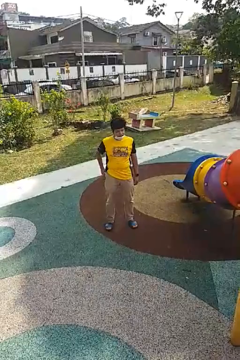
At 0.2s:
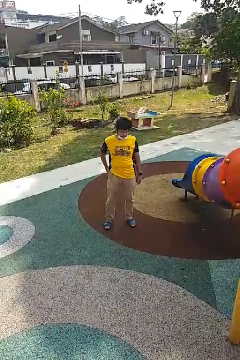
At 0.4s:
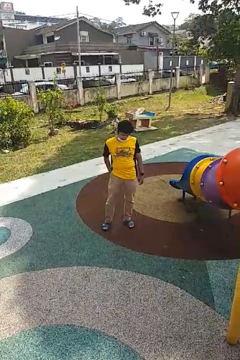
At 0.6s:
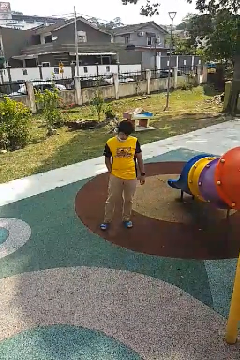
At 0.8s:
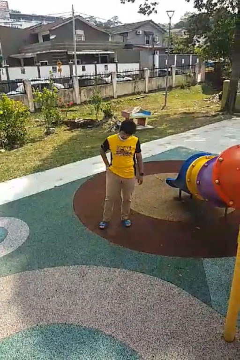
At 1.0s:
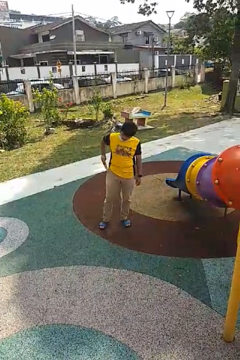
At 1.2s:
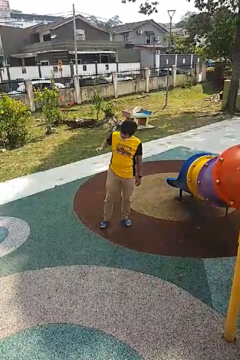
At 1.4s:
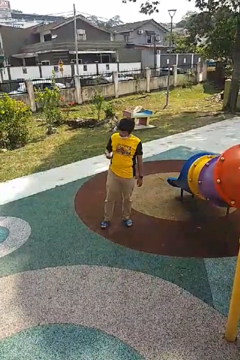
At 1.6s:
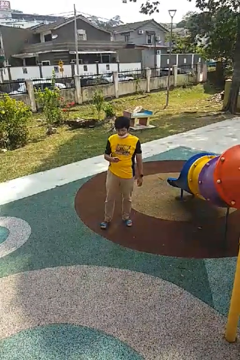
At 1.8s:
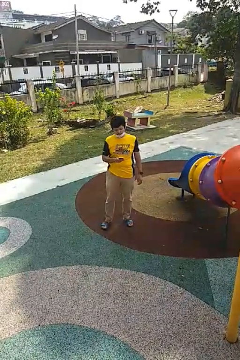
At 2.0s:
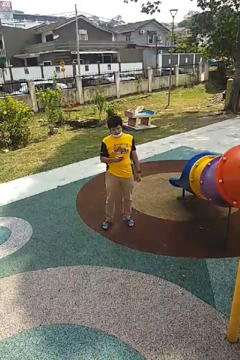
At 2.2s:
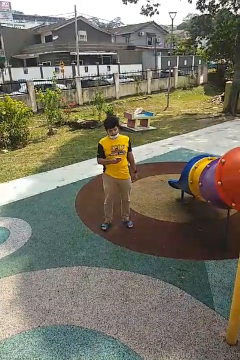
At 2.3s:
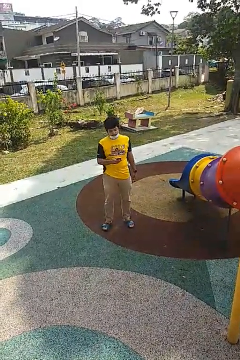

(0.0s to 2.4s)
person takes phone from pocket

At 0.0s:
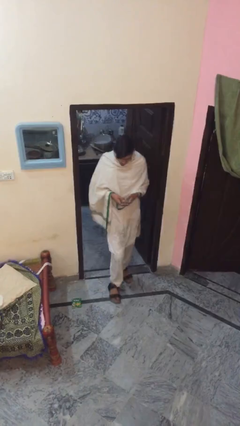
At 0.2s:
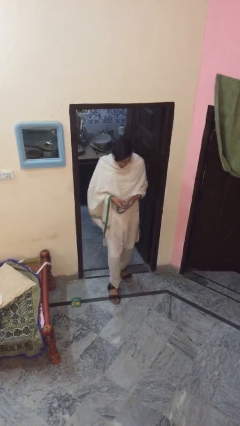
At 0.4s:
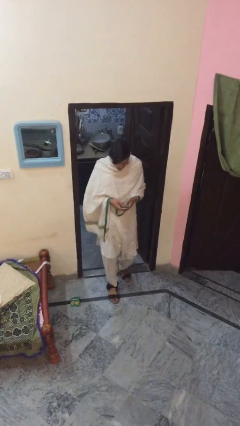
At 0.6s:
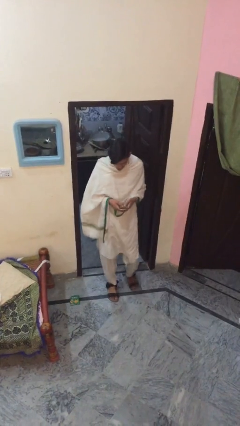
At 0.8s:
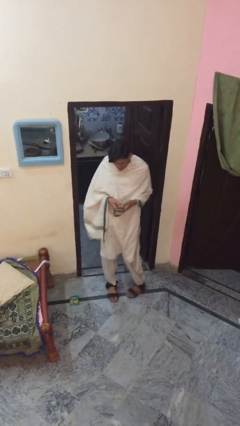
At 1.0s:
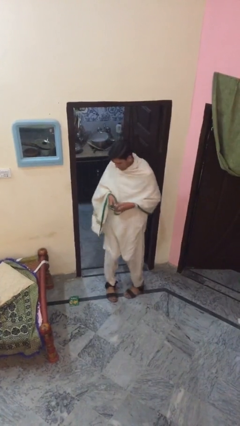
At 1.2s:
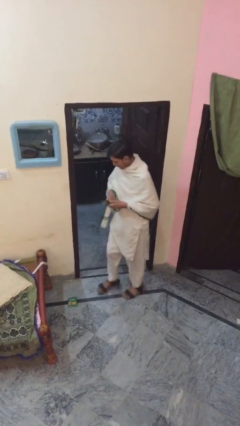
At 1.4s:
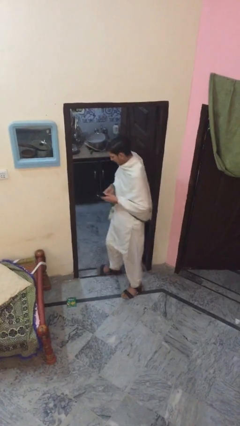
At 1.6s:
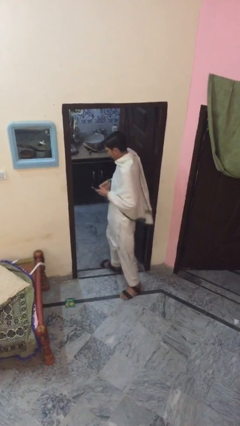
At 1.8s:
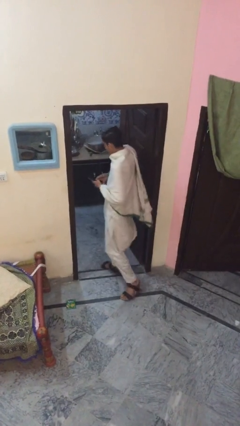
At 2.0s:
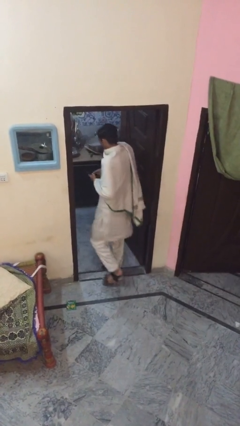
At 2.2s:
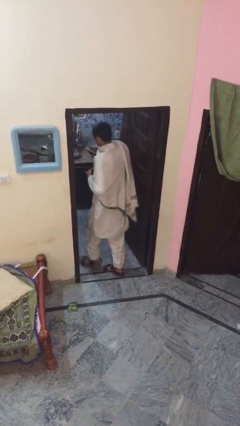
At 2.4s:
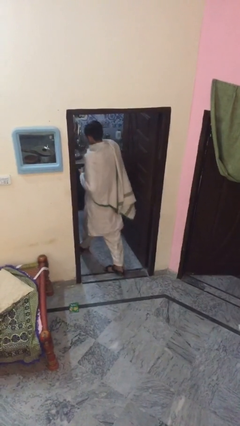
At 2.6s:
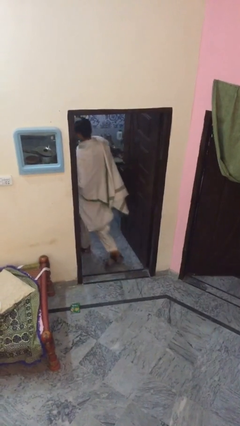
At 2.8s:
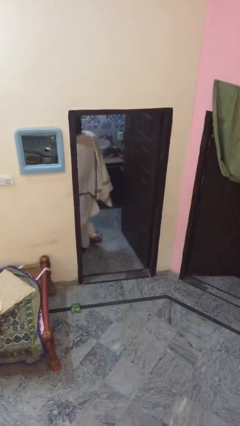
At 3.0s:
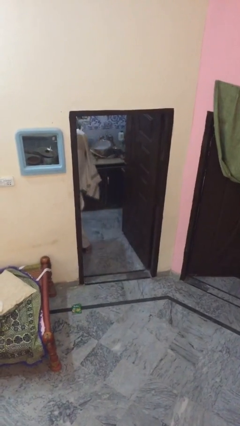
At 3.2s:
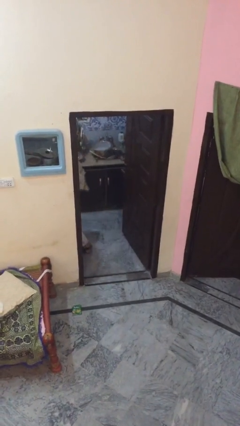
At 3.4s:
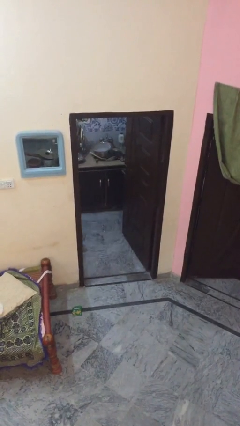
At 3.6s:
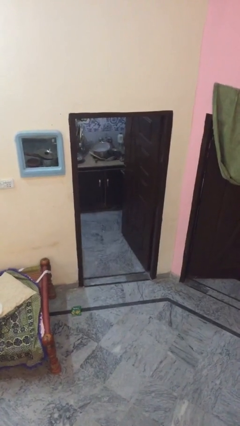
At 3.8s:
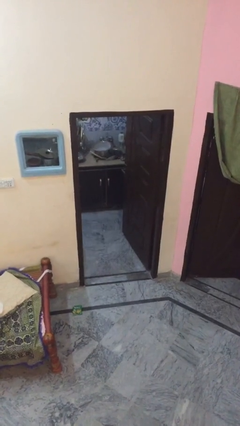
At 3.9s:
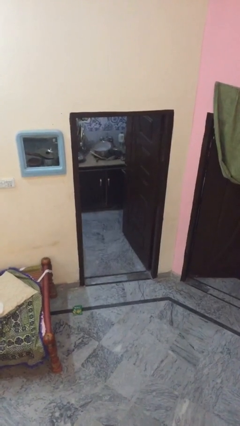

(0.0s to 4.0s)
person exits scene through structure

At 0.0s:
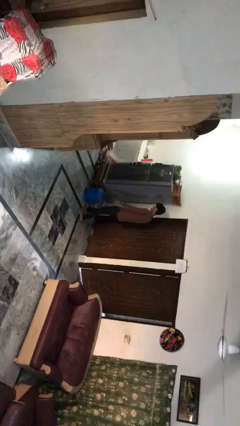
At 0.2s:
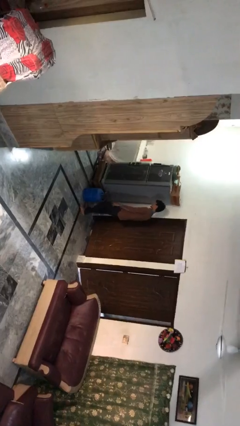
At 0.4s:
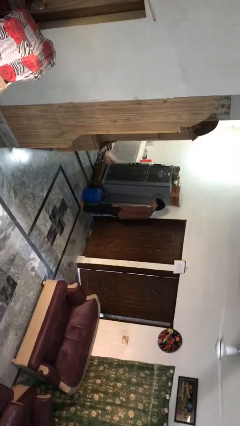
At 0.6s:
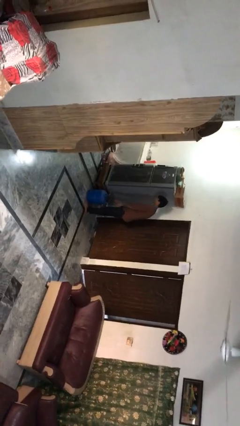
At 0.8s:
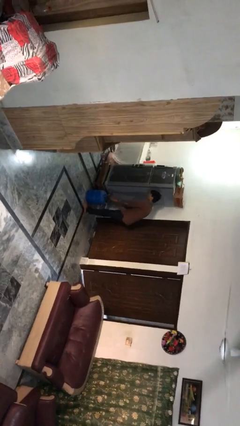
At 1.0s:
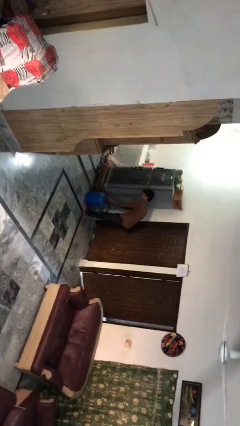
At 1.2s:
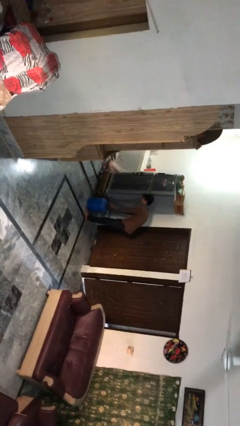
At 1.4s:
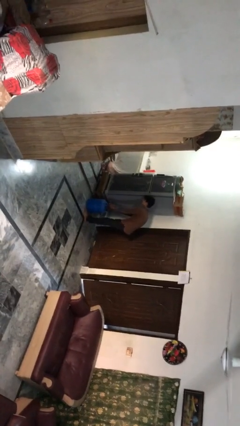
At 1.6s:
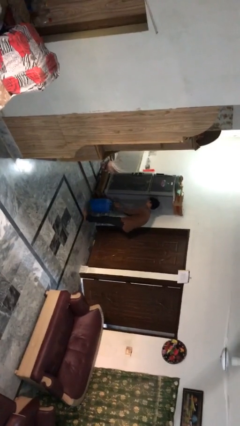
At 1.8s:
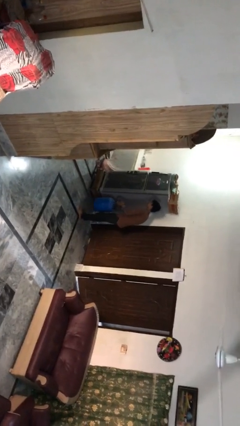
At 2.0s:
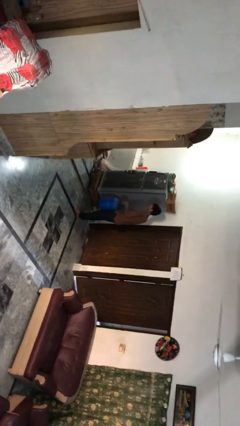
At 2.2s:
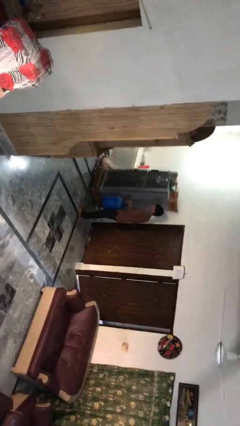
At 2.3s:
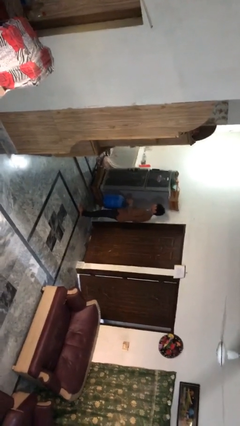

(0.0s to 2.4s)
person picks up object from floor

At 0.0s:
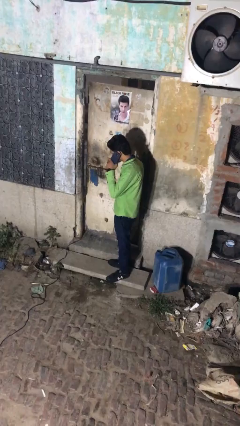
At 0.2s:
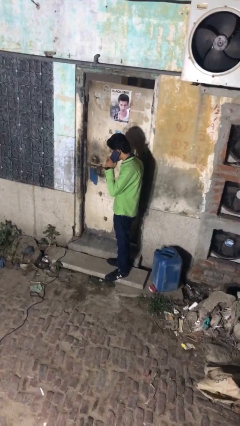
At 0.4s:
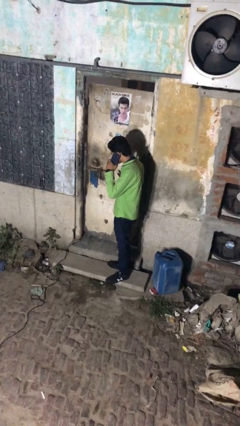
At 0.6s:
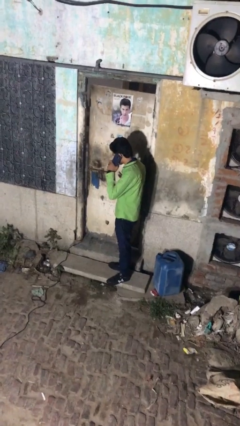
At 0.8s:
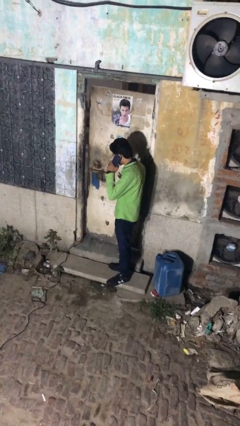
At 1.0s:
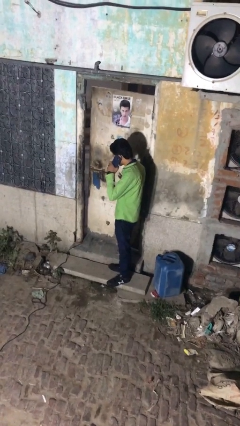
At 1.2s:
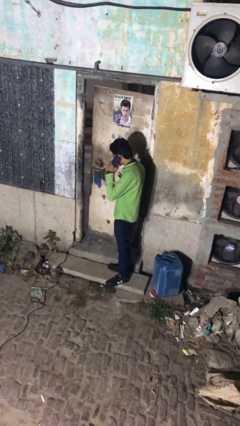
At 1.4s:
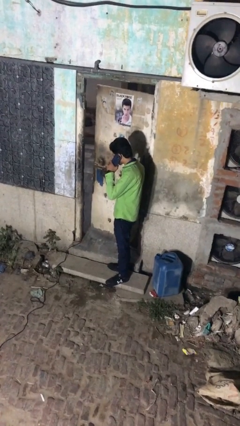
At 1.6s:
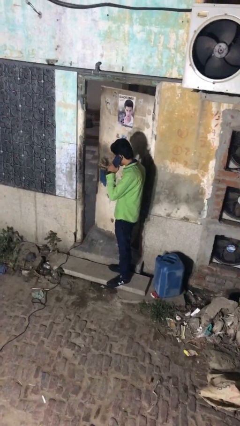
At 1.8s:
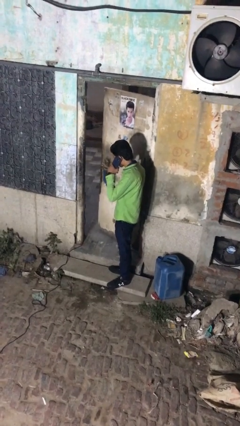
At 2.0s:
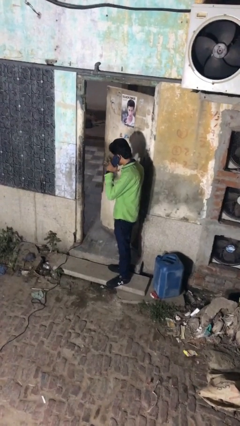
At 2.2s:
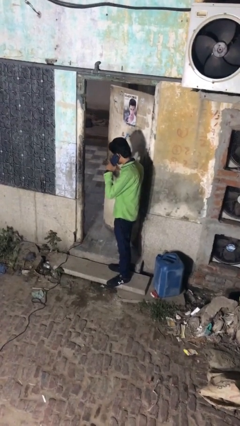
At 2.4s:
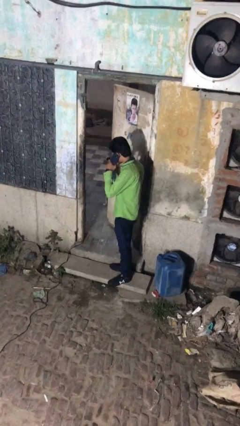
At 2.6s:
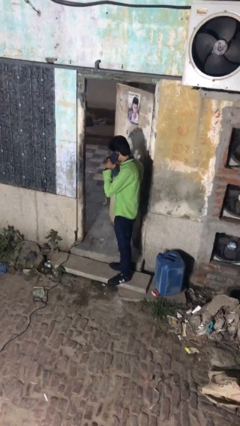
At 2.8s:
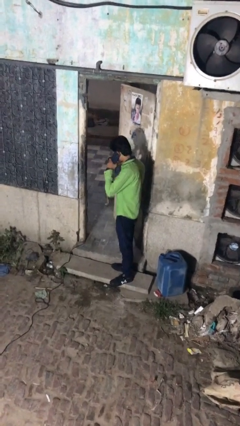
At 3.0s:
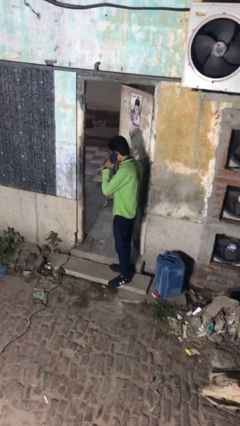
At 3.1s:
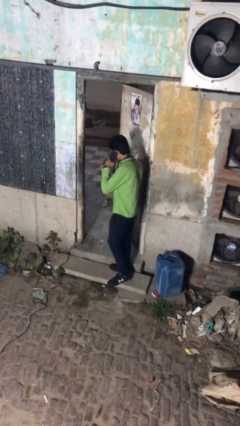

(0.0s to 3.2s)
person opens facility door

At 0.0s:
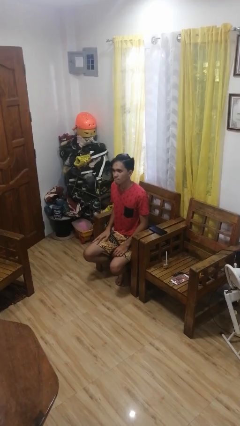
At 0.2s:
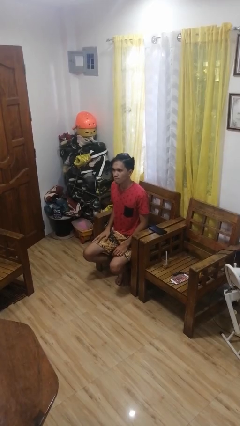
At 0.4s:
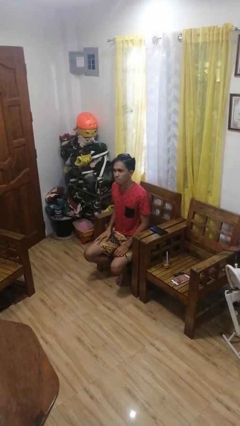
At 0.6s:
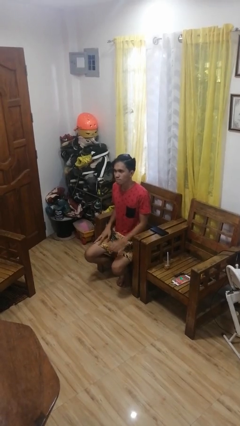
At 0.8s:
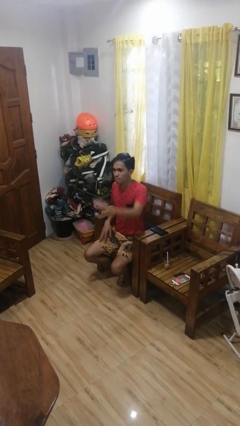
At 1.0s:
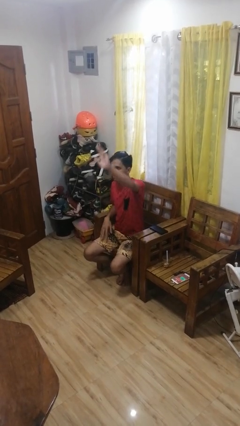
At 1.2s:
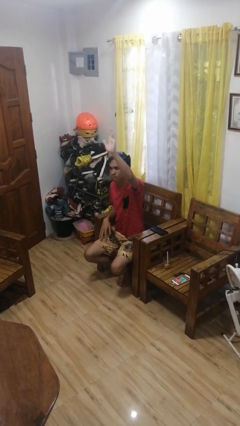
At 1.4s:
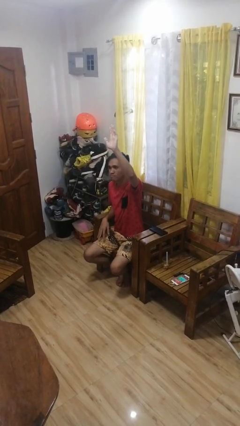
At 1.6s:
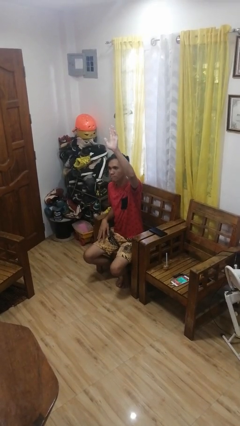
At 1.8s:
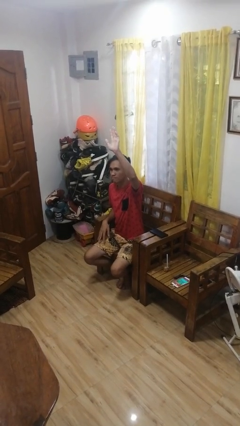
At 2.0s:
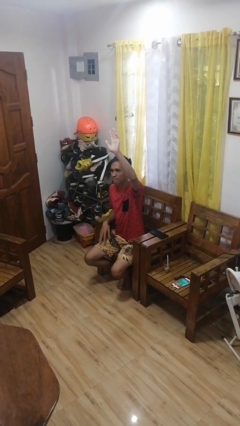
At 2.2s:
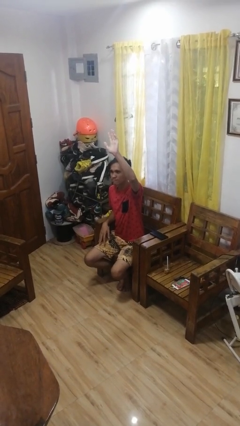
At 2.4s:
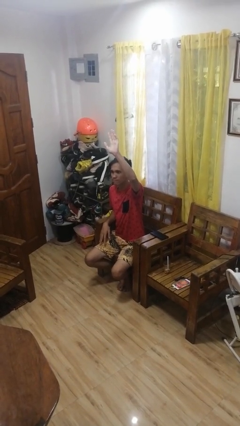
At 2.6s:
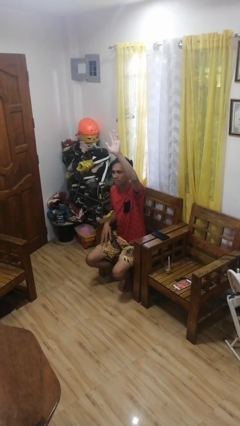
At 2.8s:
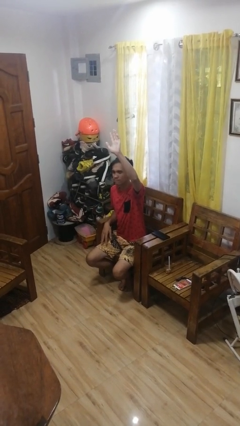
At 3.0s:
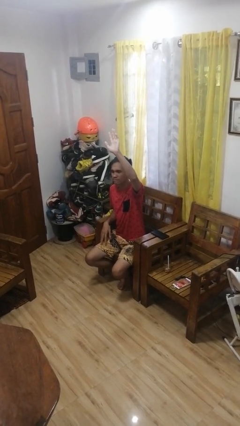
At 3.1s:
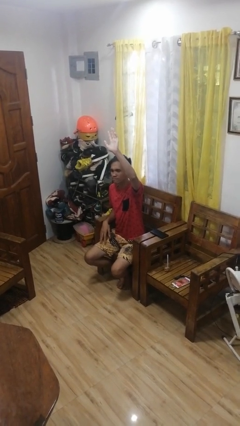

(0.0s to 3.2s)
person gestures raise hand

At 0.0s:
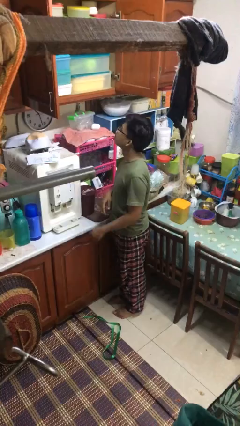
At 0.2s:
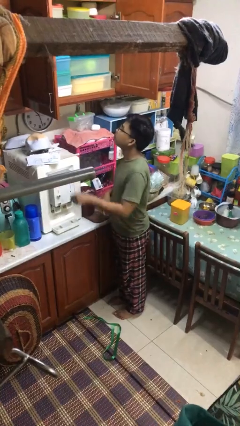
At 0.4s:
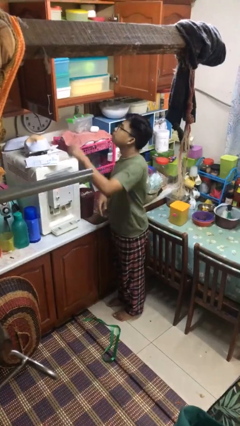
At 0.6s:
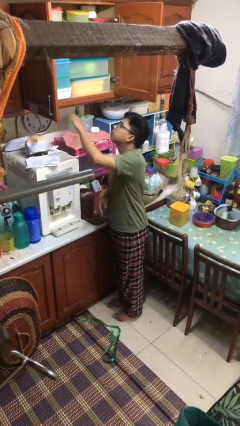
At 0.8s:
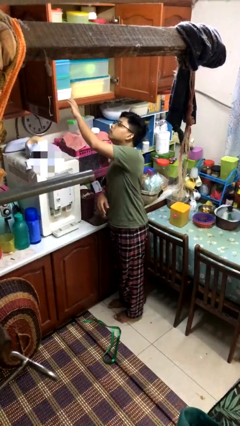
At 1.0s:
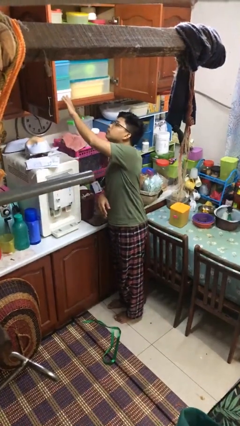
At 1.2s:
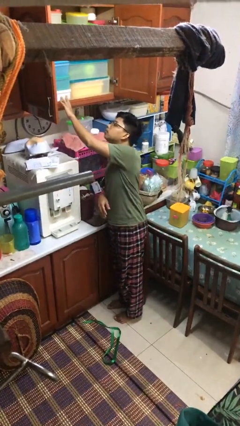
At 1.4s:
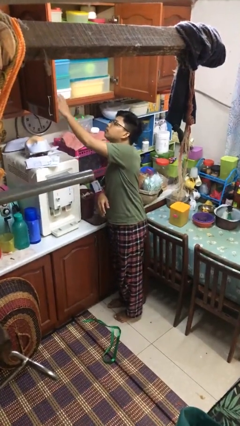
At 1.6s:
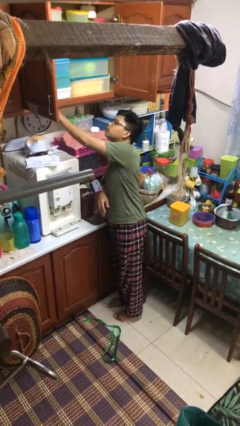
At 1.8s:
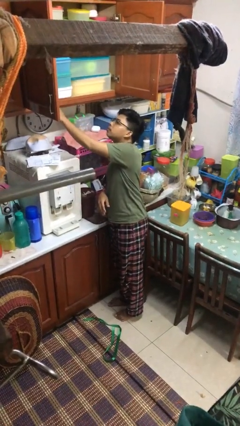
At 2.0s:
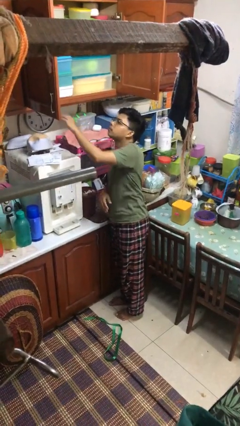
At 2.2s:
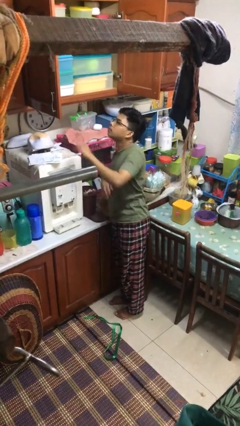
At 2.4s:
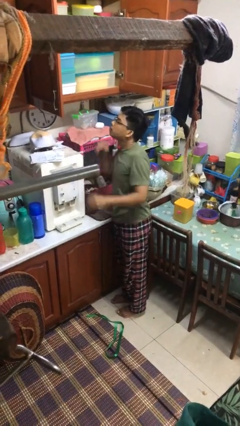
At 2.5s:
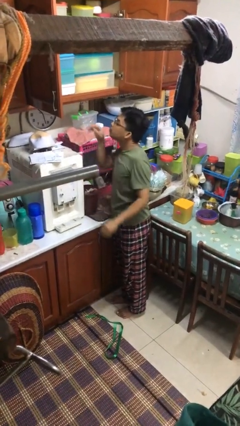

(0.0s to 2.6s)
person searches in kitchen drawer

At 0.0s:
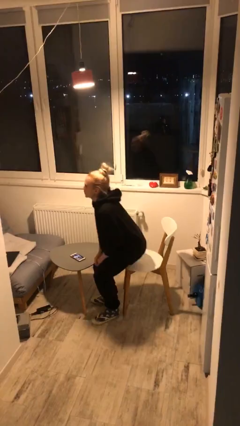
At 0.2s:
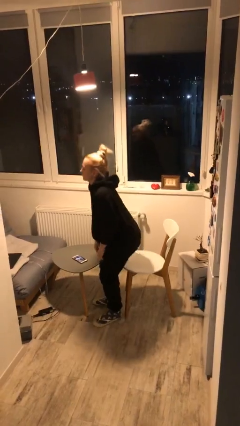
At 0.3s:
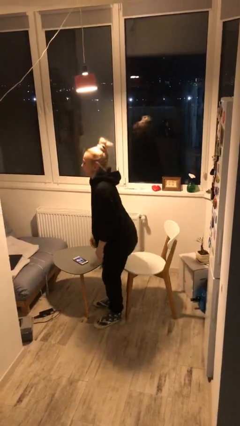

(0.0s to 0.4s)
person stands up
